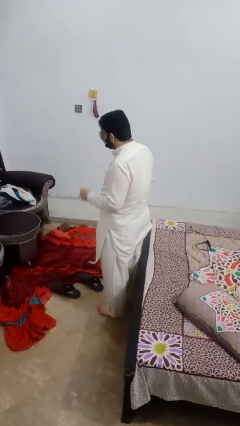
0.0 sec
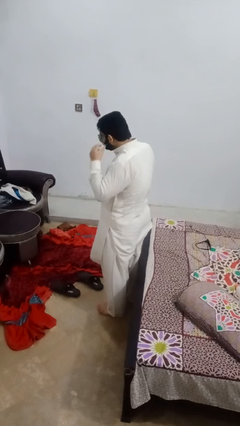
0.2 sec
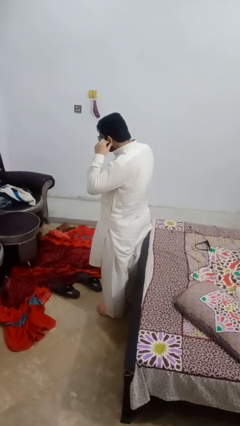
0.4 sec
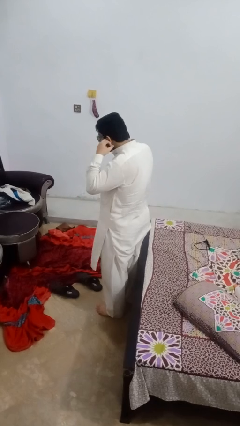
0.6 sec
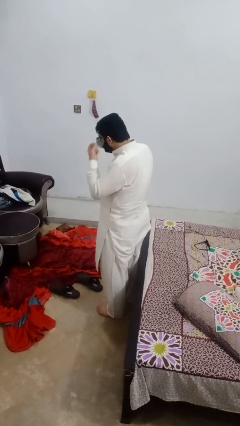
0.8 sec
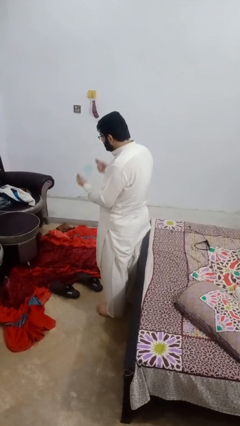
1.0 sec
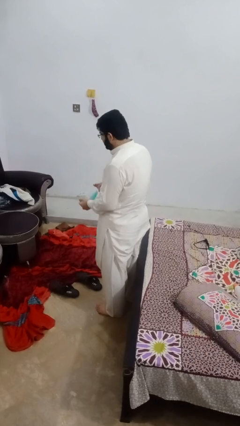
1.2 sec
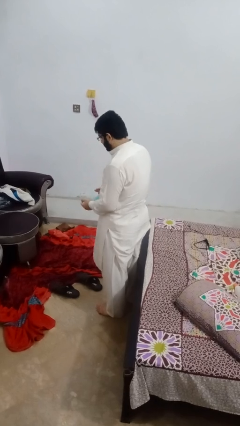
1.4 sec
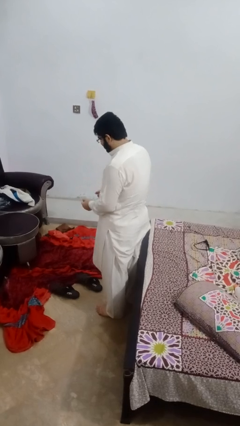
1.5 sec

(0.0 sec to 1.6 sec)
person takes off facemask

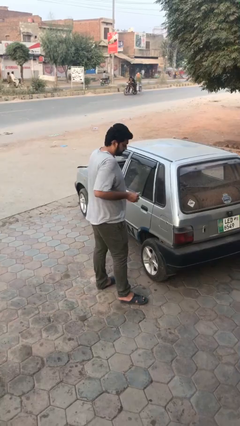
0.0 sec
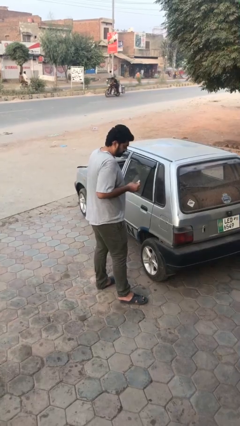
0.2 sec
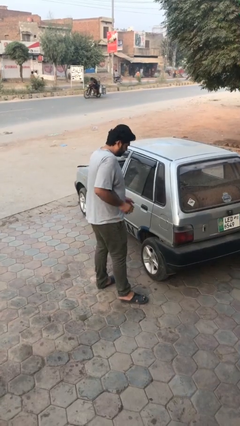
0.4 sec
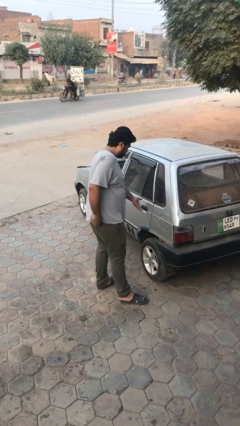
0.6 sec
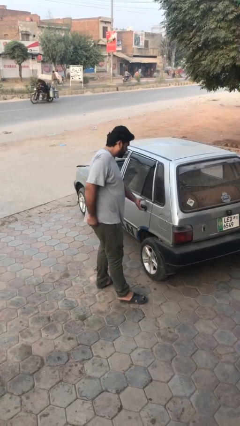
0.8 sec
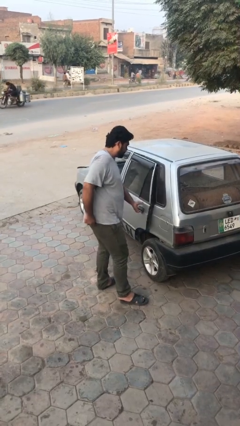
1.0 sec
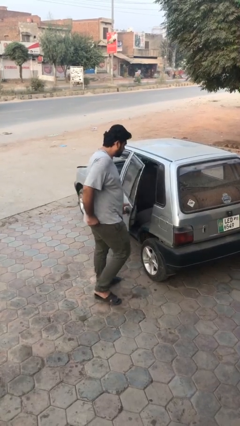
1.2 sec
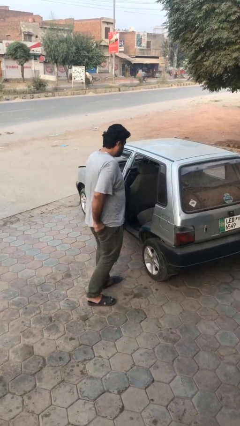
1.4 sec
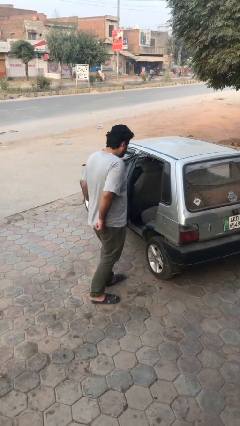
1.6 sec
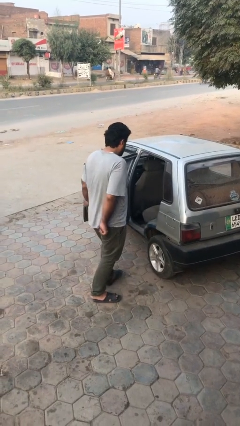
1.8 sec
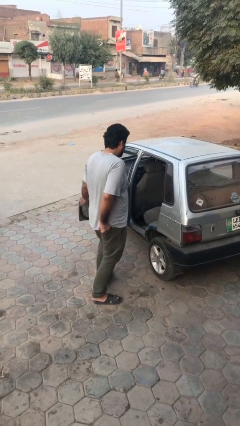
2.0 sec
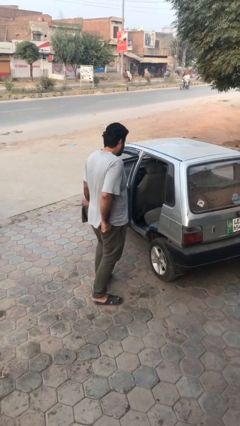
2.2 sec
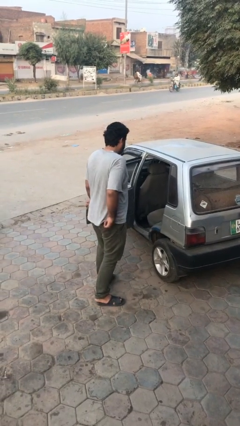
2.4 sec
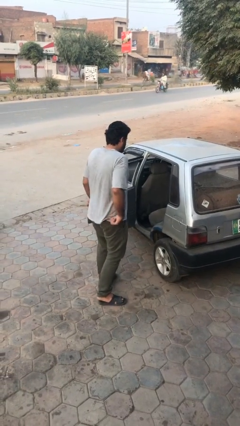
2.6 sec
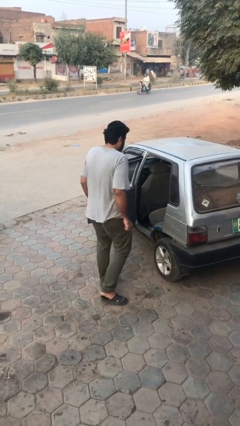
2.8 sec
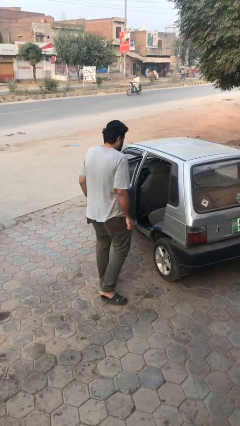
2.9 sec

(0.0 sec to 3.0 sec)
person opens car door

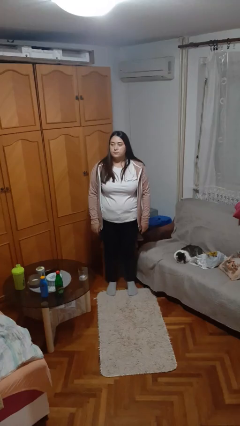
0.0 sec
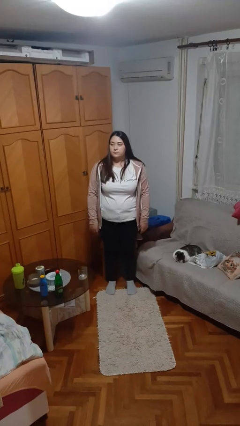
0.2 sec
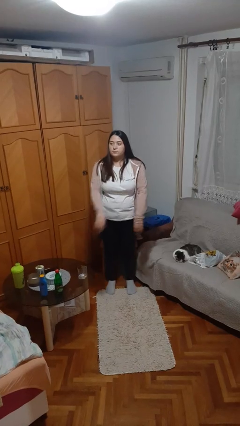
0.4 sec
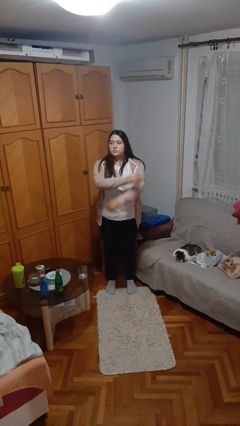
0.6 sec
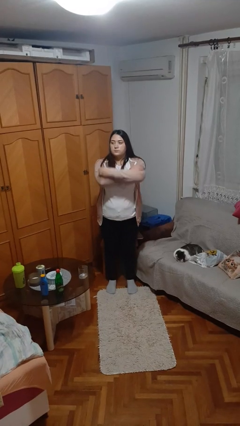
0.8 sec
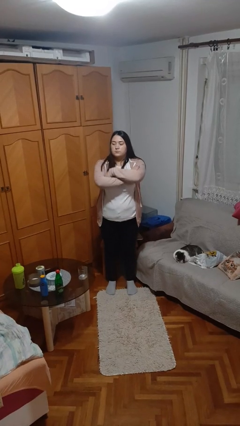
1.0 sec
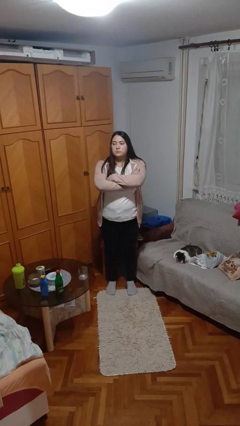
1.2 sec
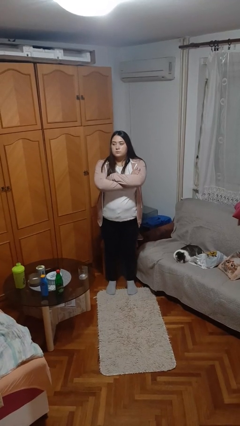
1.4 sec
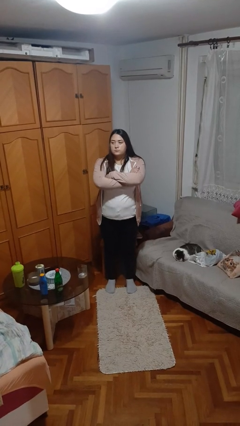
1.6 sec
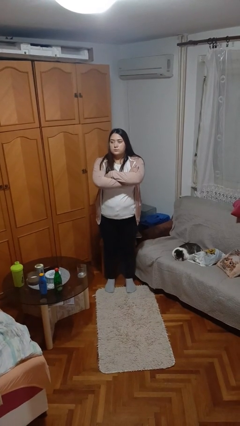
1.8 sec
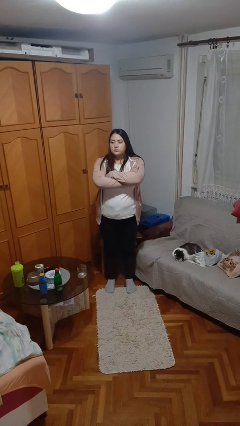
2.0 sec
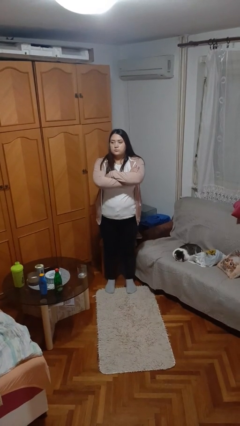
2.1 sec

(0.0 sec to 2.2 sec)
person crosses arms

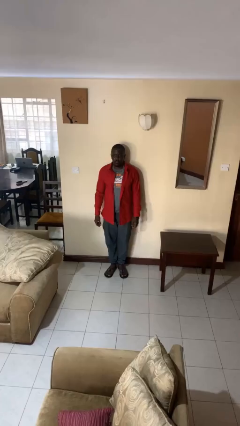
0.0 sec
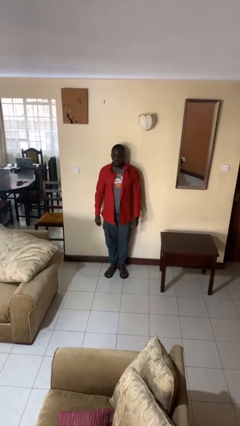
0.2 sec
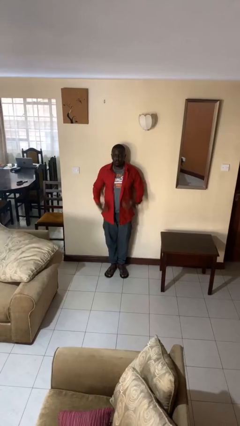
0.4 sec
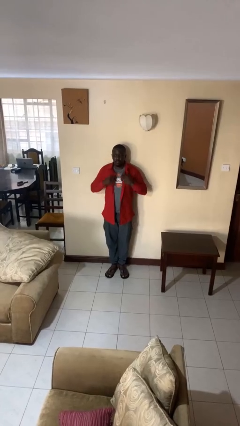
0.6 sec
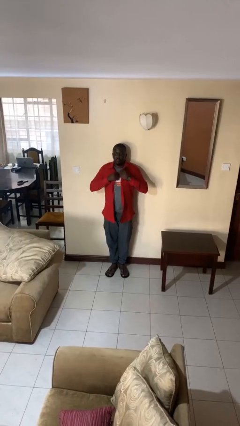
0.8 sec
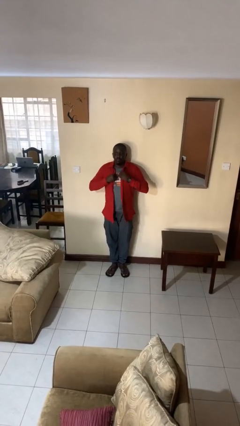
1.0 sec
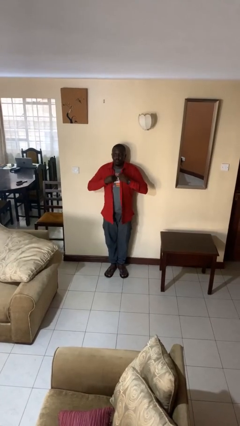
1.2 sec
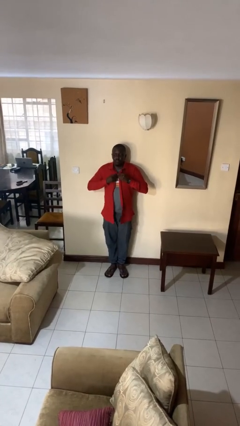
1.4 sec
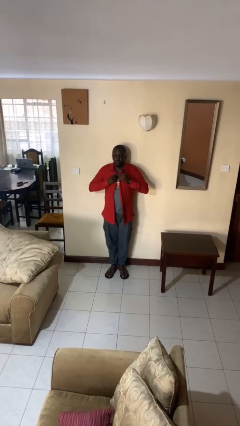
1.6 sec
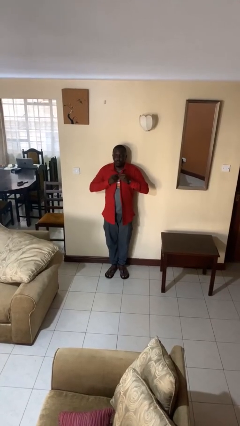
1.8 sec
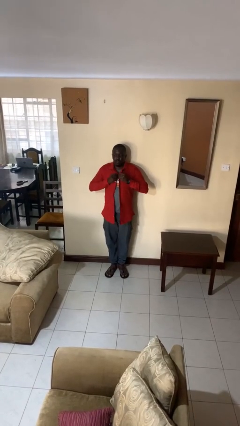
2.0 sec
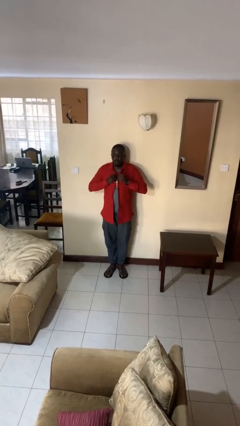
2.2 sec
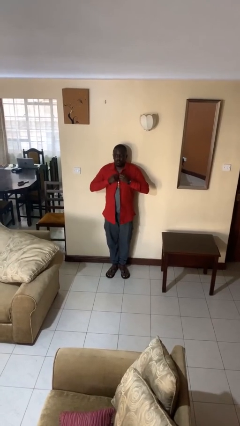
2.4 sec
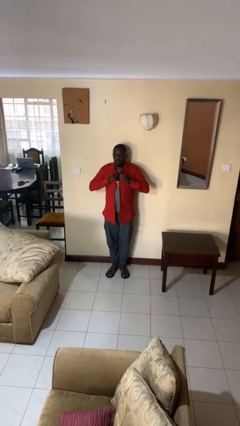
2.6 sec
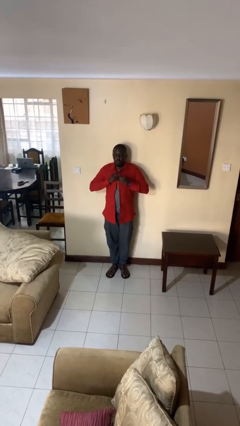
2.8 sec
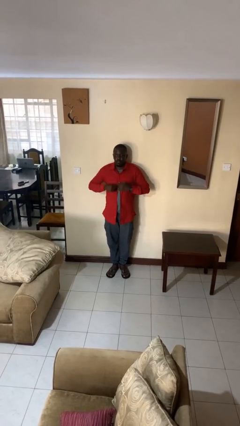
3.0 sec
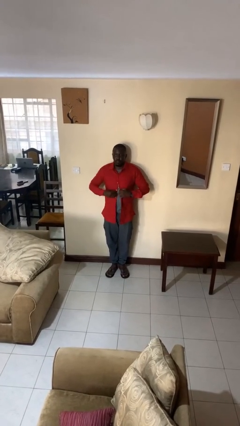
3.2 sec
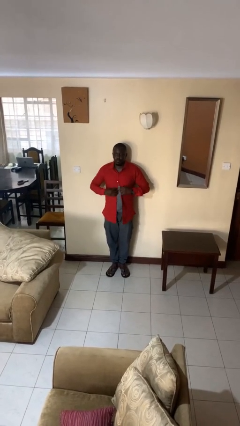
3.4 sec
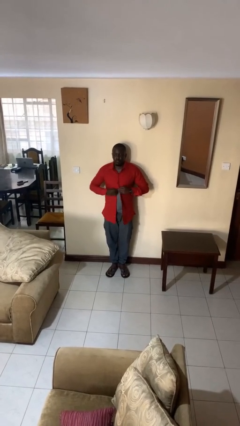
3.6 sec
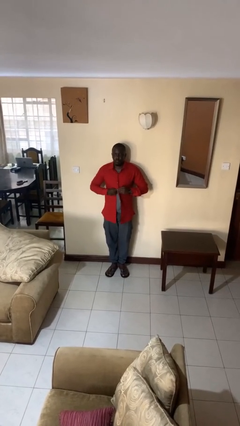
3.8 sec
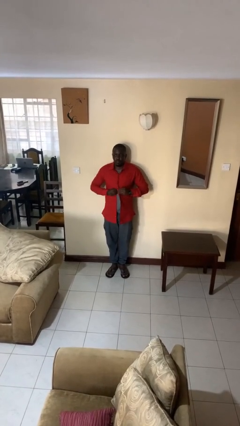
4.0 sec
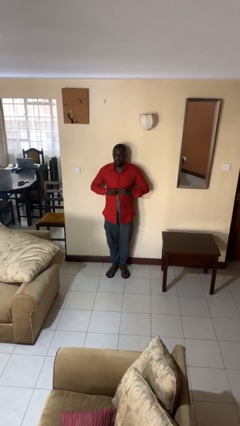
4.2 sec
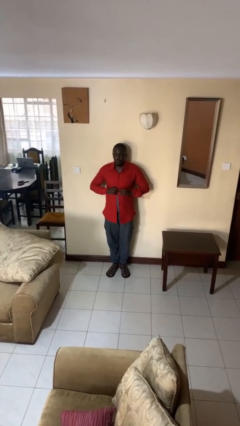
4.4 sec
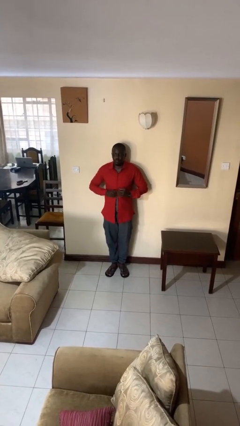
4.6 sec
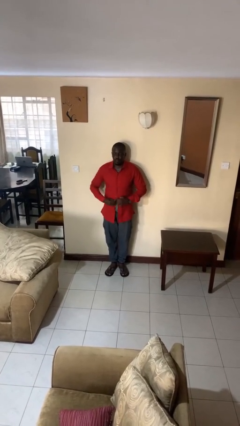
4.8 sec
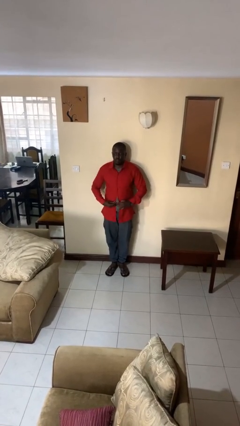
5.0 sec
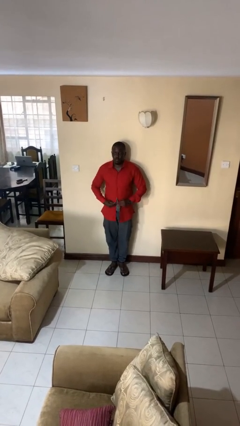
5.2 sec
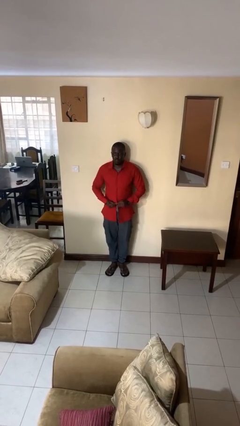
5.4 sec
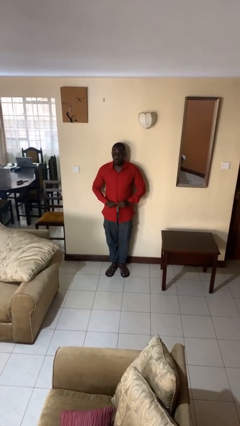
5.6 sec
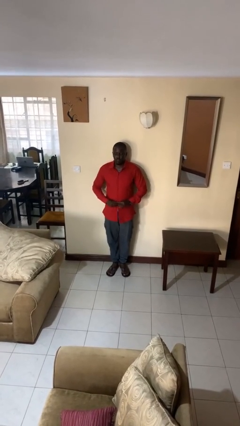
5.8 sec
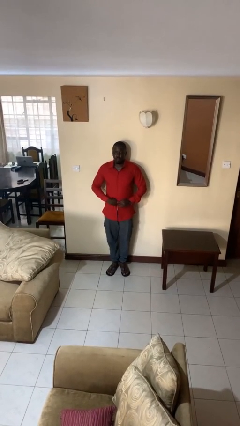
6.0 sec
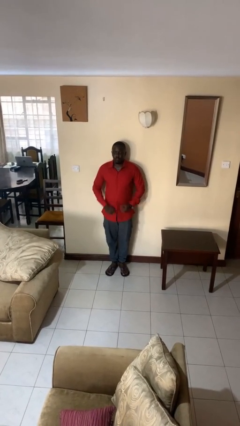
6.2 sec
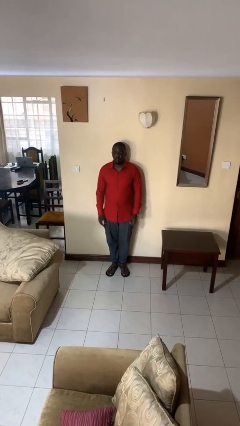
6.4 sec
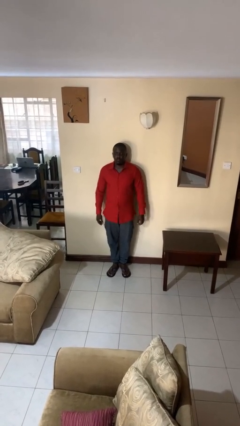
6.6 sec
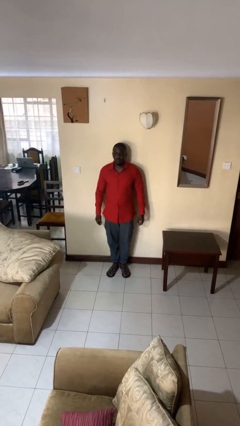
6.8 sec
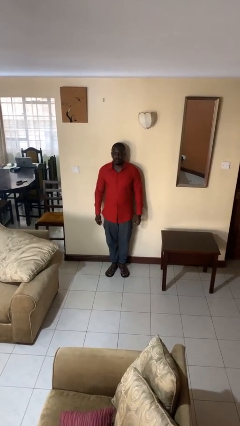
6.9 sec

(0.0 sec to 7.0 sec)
person buttons shirt

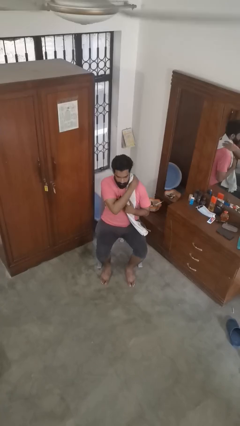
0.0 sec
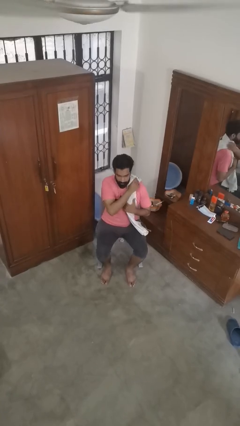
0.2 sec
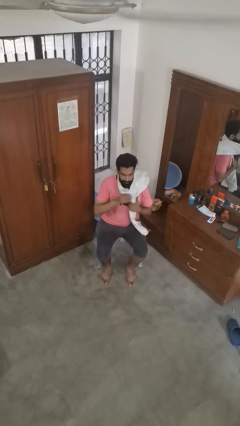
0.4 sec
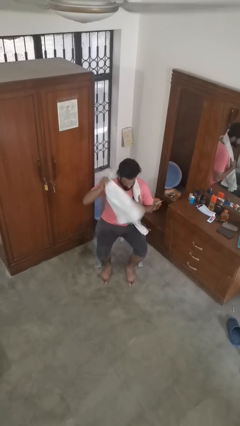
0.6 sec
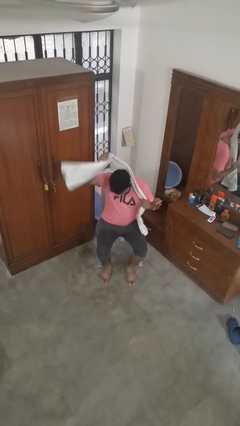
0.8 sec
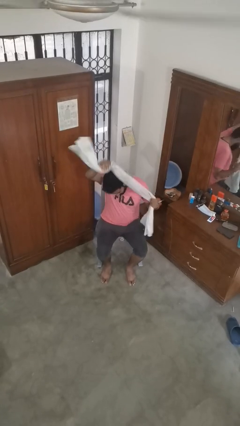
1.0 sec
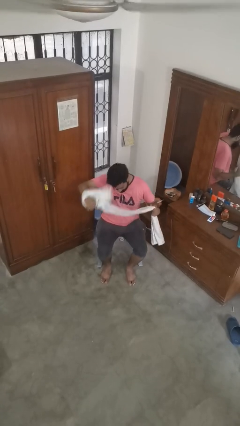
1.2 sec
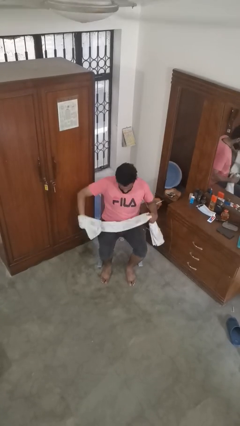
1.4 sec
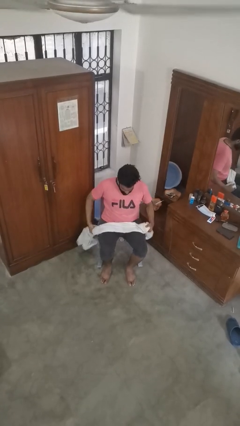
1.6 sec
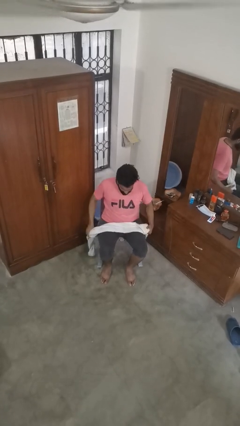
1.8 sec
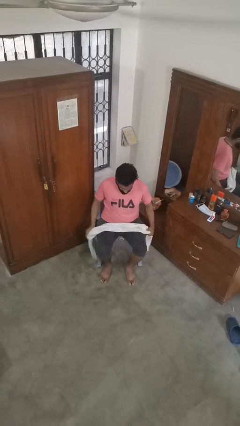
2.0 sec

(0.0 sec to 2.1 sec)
person takes off scarf

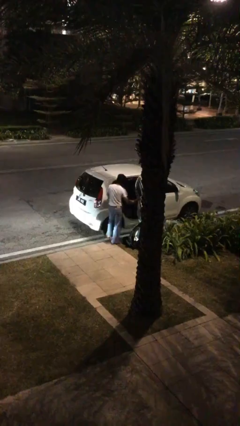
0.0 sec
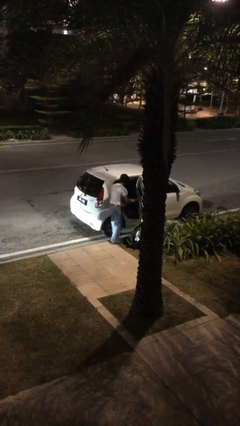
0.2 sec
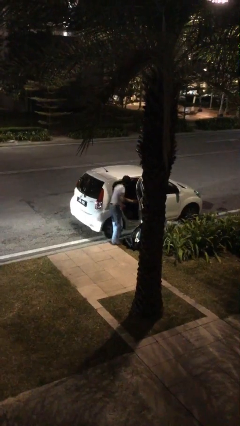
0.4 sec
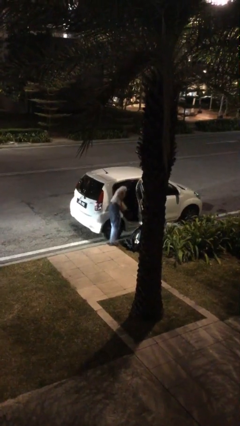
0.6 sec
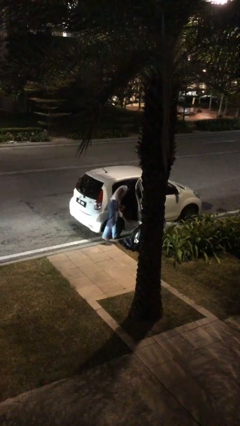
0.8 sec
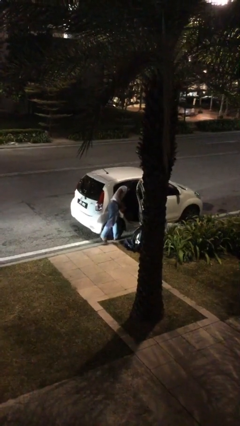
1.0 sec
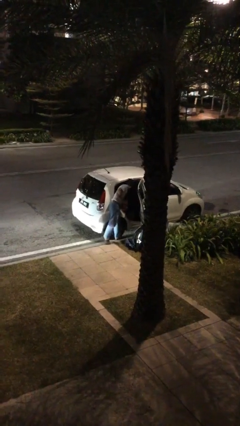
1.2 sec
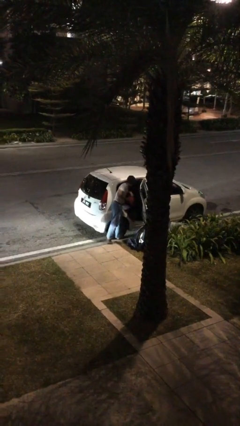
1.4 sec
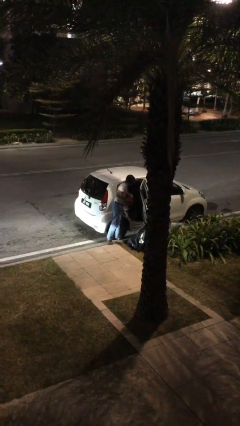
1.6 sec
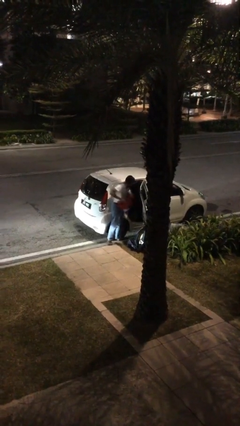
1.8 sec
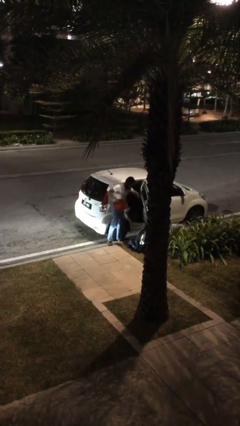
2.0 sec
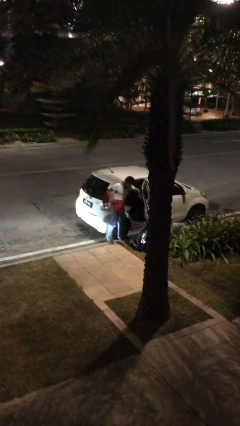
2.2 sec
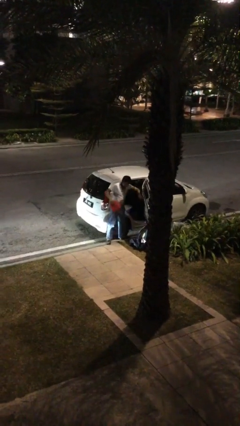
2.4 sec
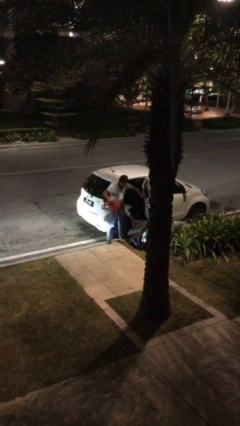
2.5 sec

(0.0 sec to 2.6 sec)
person unloads car
